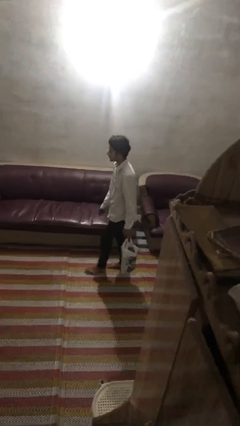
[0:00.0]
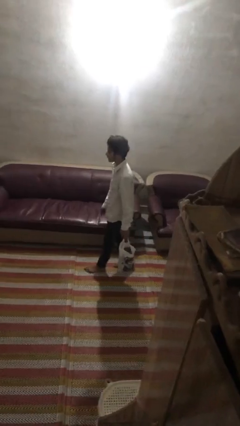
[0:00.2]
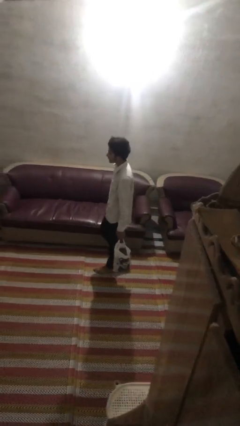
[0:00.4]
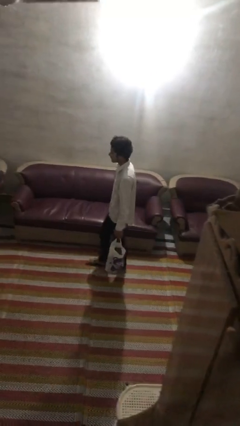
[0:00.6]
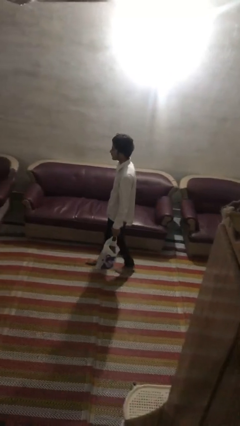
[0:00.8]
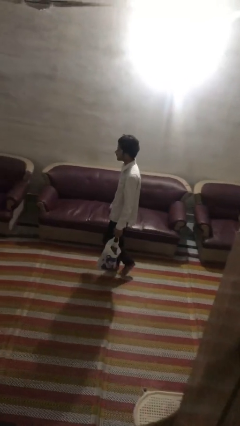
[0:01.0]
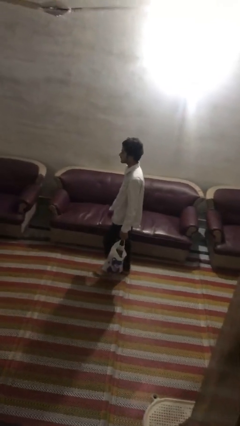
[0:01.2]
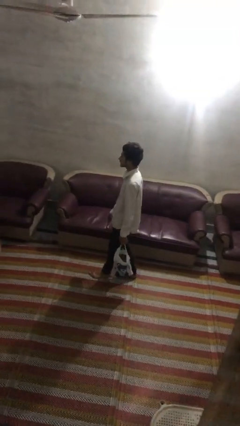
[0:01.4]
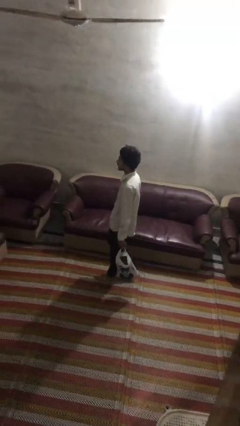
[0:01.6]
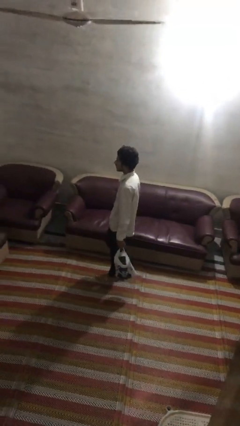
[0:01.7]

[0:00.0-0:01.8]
person carries groceries

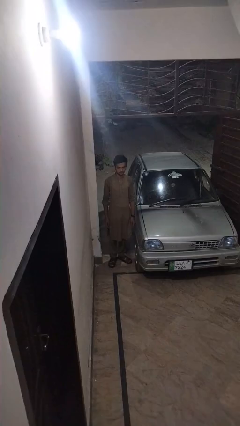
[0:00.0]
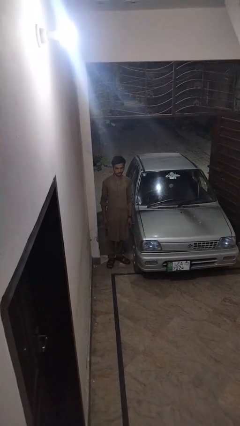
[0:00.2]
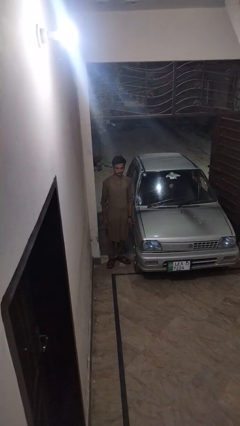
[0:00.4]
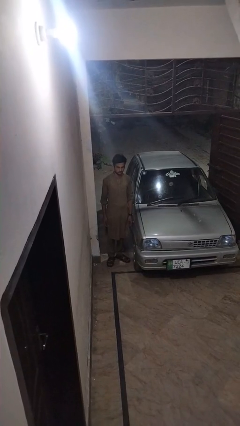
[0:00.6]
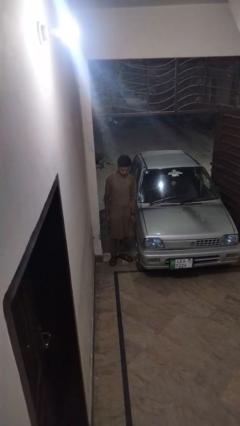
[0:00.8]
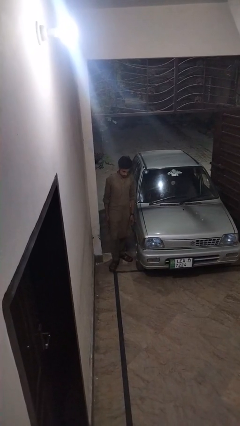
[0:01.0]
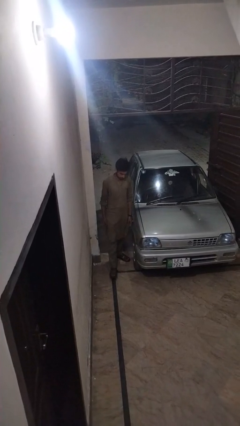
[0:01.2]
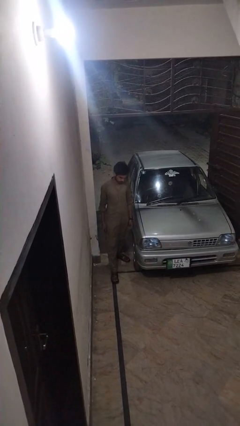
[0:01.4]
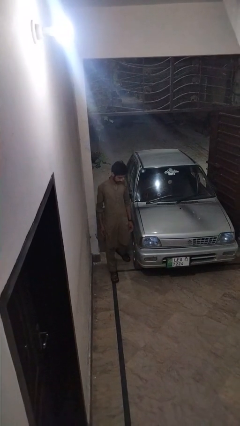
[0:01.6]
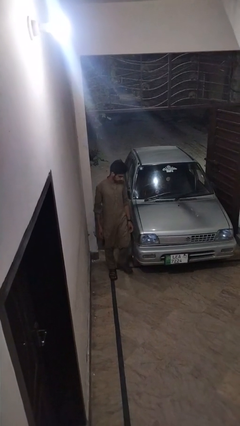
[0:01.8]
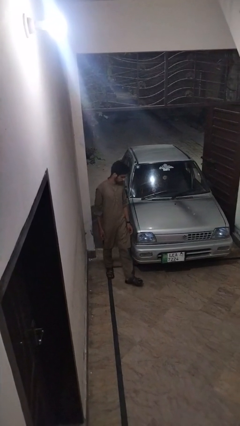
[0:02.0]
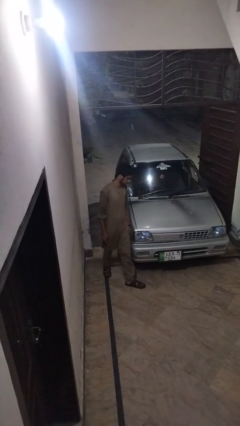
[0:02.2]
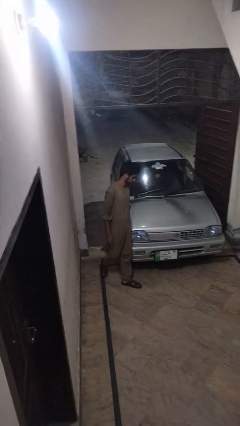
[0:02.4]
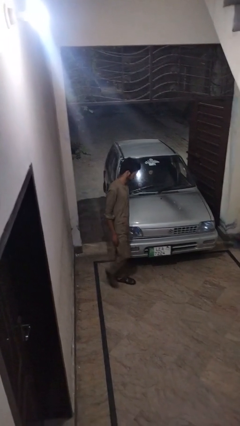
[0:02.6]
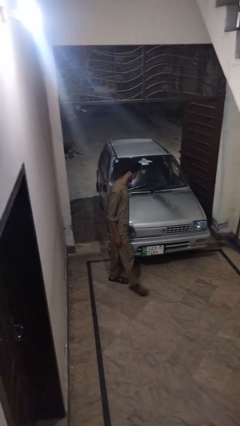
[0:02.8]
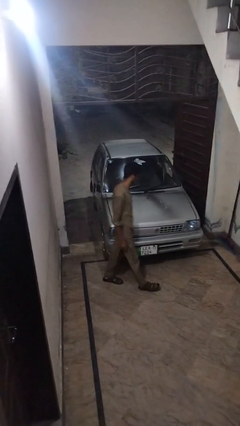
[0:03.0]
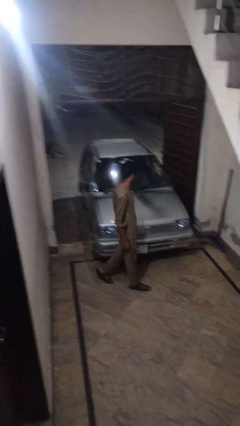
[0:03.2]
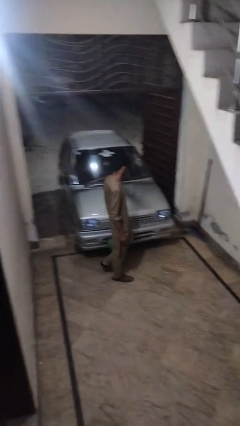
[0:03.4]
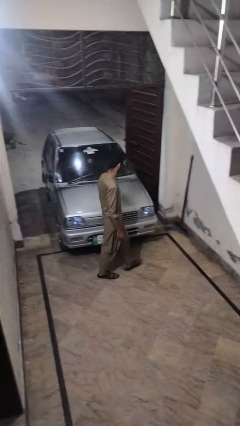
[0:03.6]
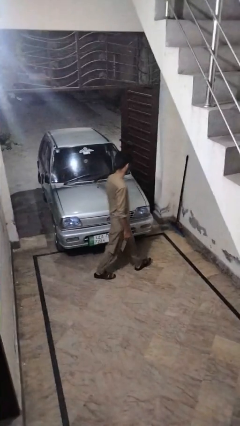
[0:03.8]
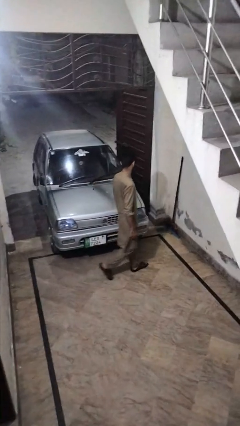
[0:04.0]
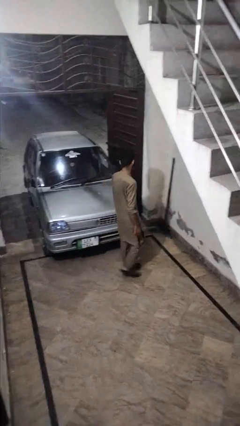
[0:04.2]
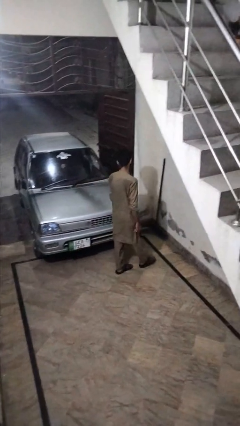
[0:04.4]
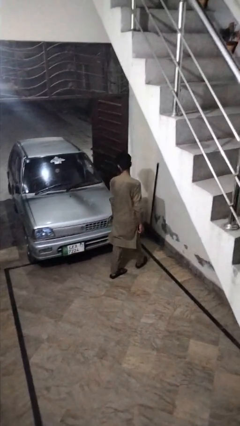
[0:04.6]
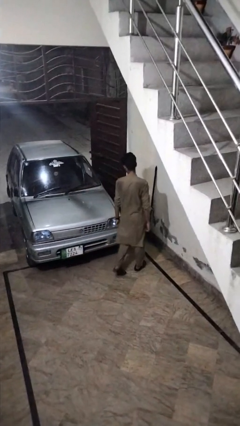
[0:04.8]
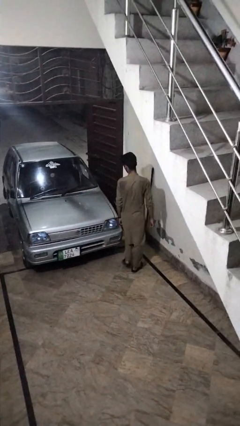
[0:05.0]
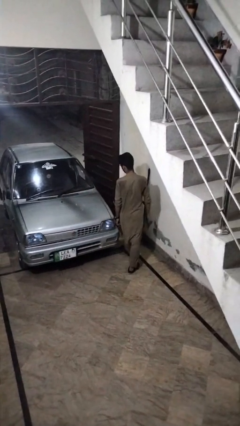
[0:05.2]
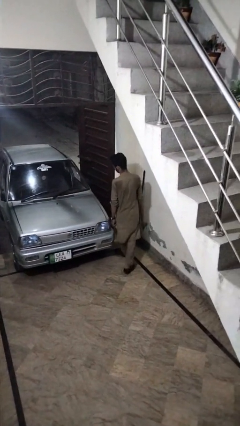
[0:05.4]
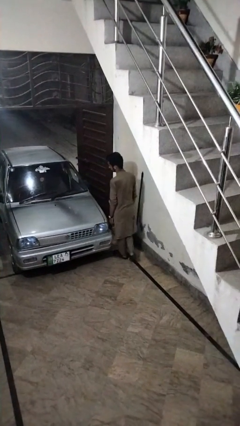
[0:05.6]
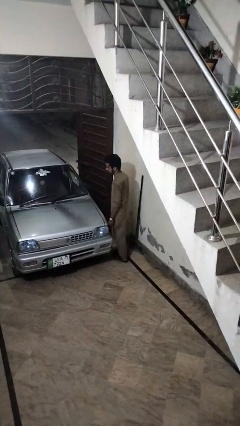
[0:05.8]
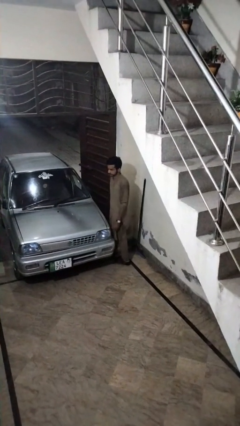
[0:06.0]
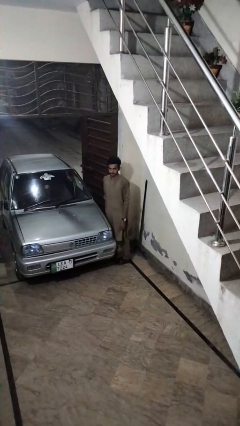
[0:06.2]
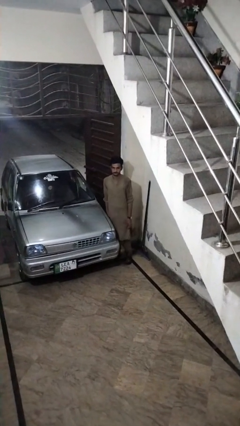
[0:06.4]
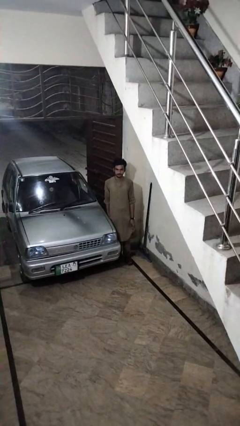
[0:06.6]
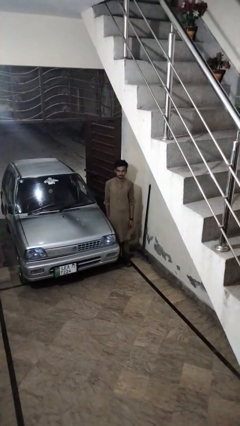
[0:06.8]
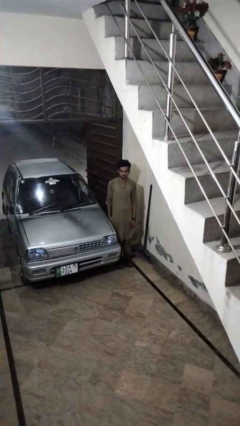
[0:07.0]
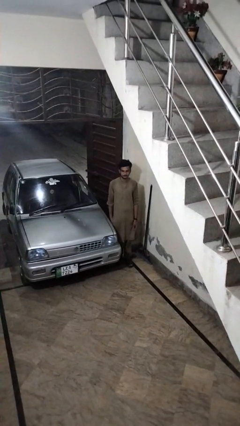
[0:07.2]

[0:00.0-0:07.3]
person walks around car

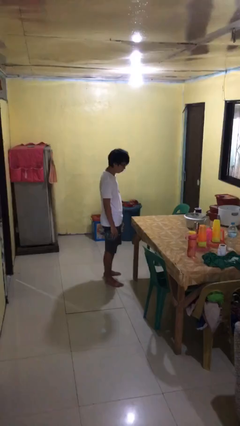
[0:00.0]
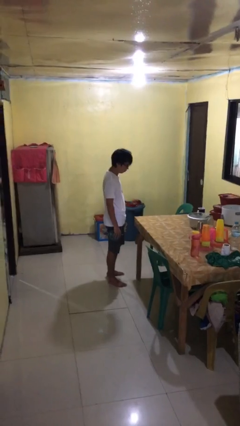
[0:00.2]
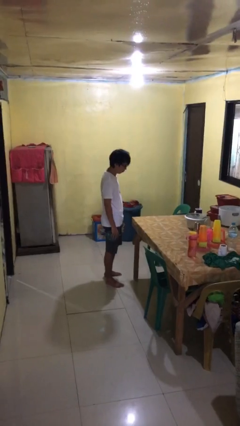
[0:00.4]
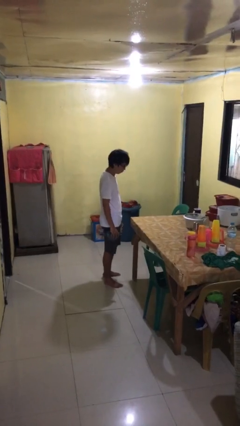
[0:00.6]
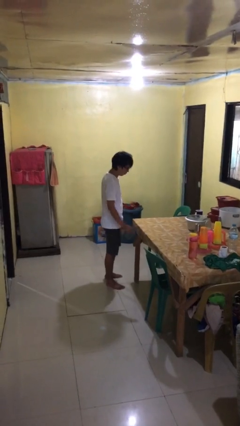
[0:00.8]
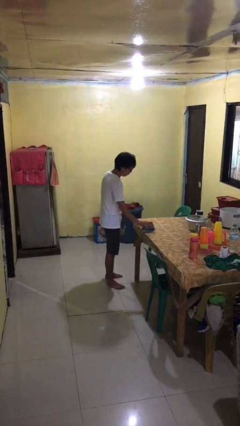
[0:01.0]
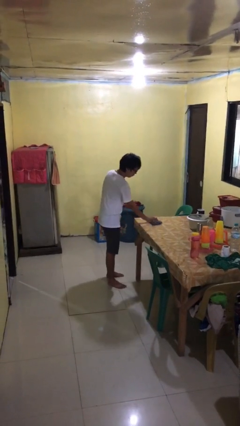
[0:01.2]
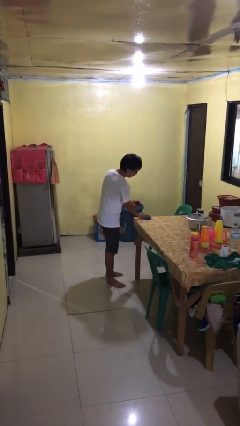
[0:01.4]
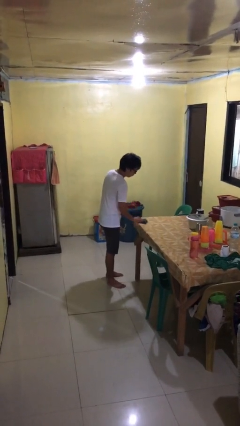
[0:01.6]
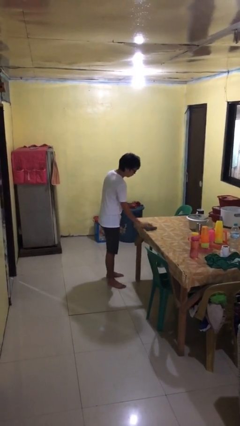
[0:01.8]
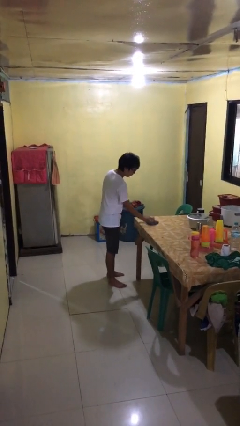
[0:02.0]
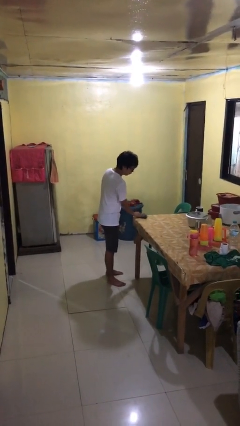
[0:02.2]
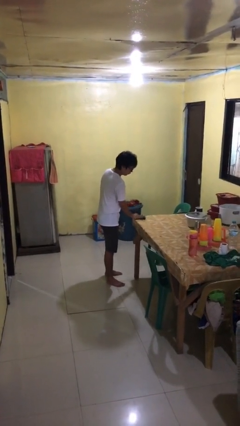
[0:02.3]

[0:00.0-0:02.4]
person cleans table with rag

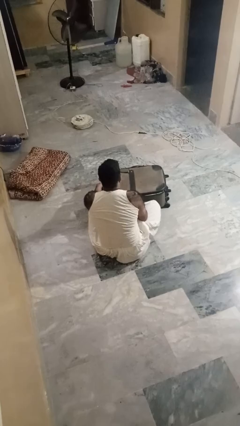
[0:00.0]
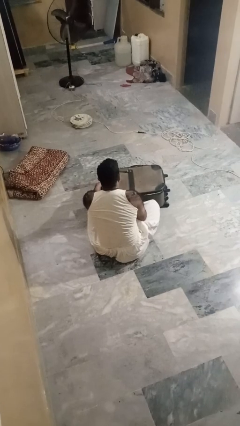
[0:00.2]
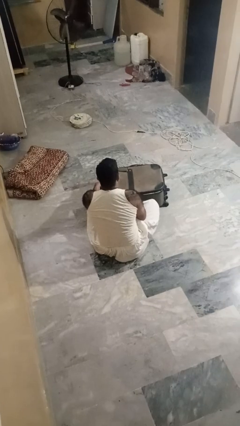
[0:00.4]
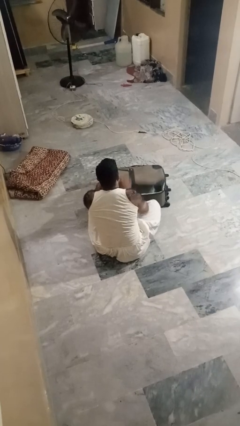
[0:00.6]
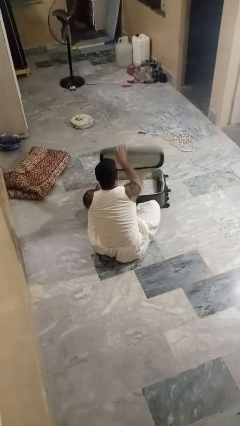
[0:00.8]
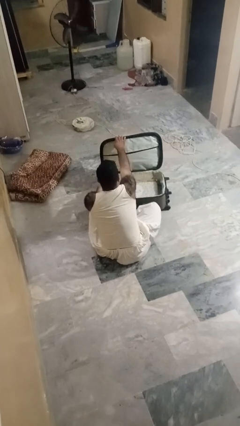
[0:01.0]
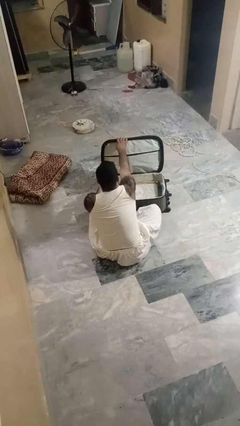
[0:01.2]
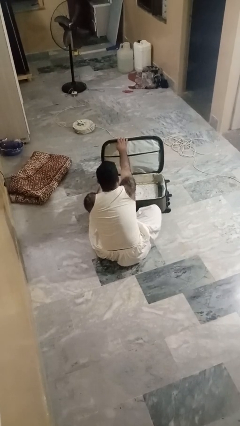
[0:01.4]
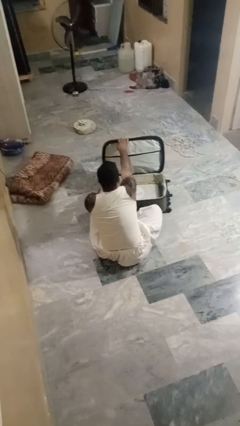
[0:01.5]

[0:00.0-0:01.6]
person opens suitcase

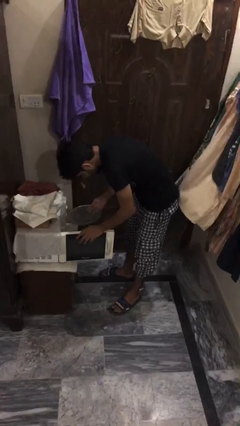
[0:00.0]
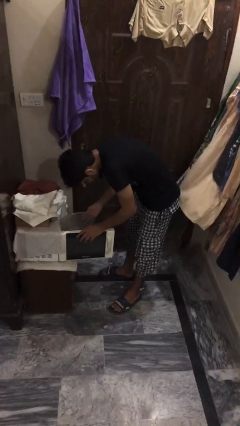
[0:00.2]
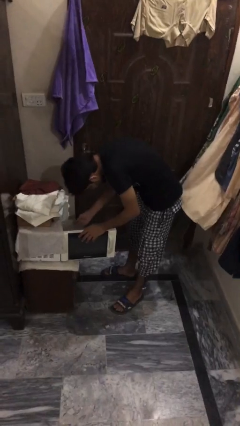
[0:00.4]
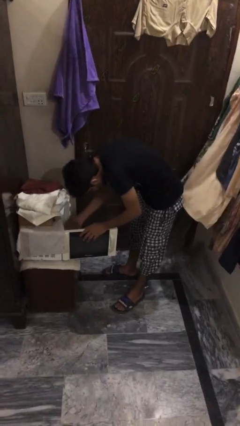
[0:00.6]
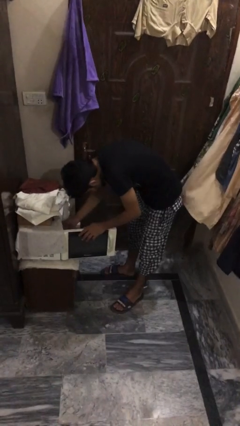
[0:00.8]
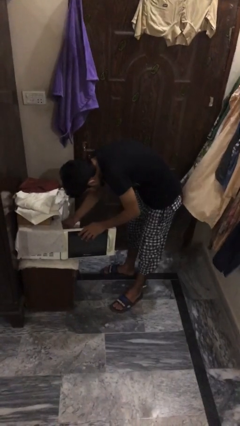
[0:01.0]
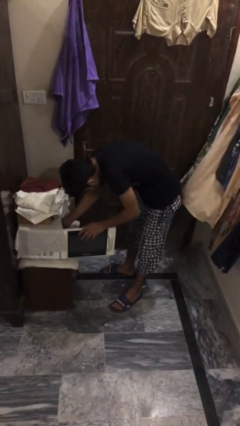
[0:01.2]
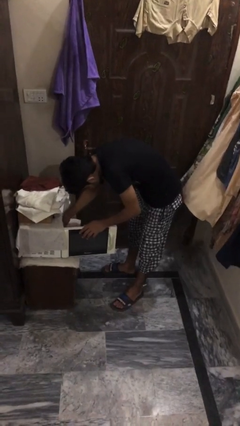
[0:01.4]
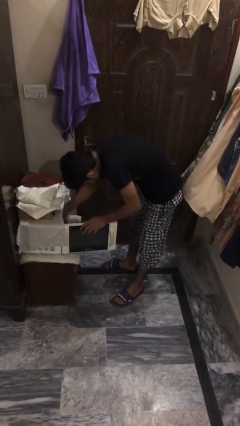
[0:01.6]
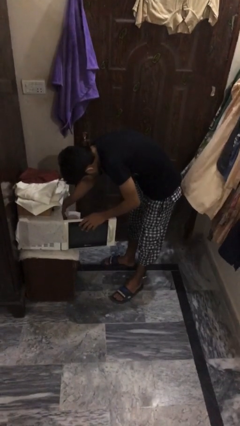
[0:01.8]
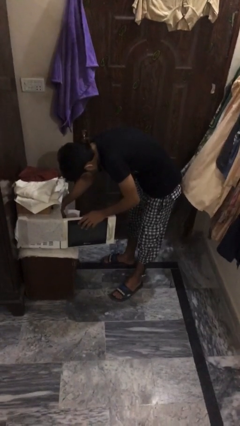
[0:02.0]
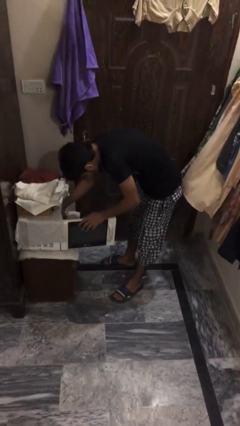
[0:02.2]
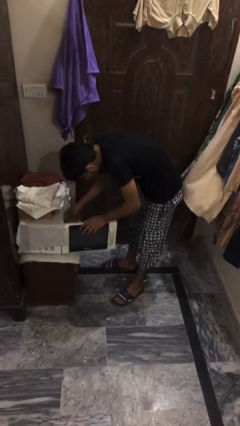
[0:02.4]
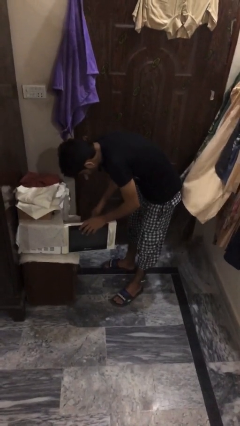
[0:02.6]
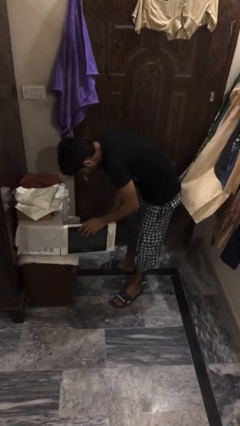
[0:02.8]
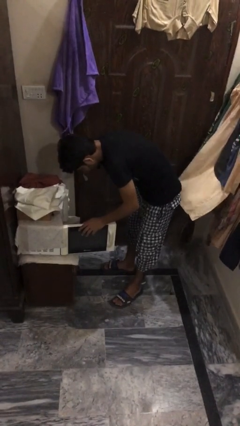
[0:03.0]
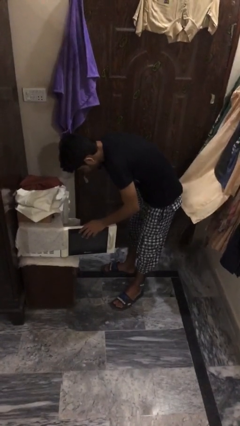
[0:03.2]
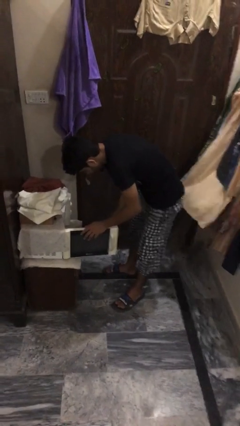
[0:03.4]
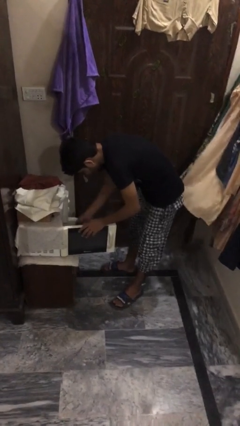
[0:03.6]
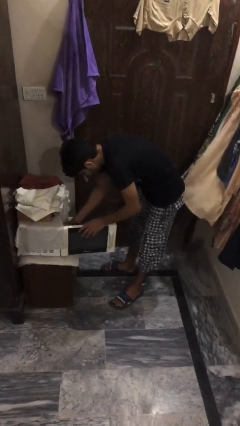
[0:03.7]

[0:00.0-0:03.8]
person puts object into oven

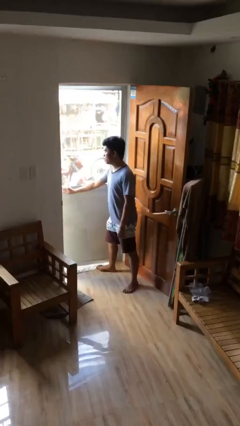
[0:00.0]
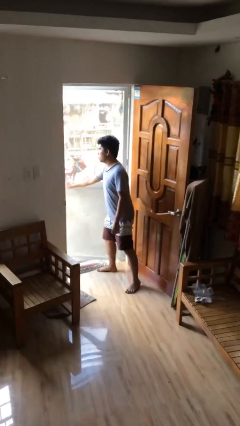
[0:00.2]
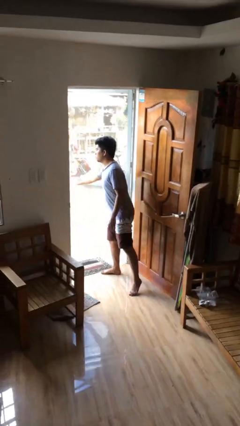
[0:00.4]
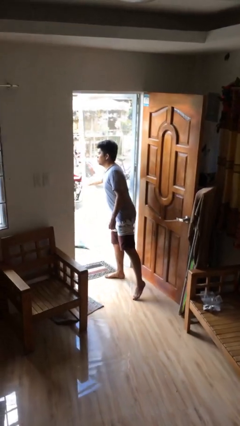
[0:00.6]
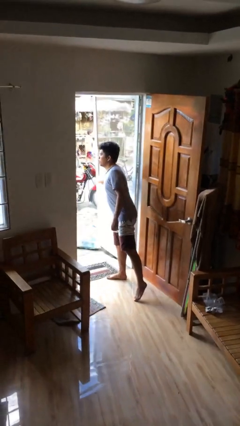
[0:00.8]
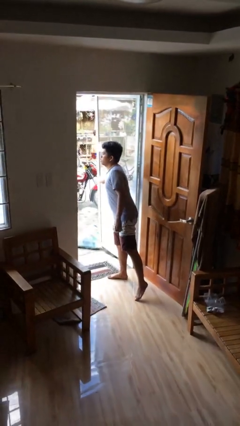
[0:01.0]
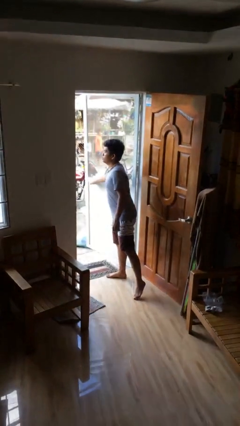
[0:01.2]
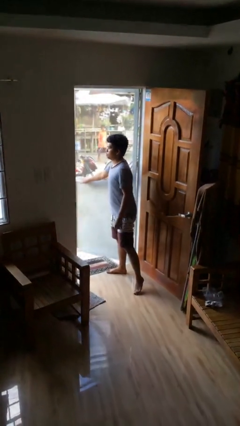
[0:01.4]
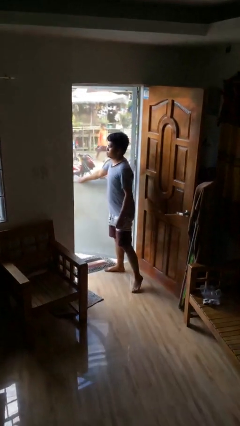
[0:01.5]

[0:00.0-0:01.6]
person opens facility door
